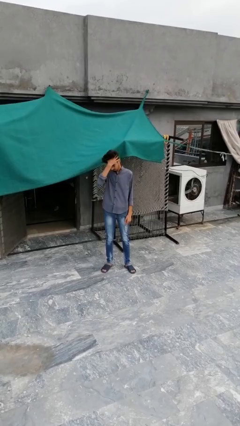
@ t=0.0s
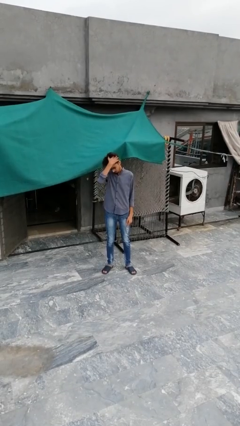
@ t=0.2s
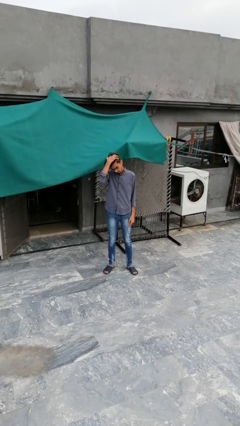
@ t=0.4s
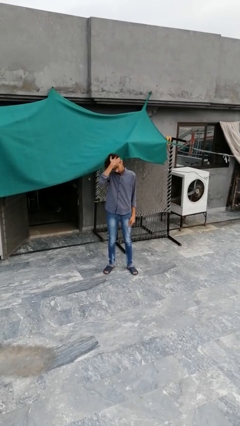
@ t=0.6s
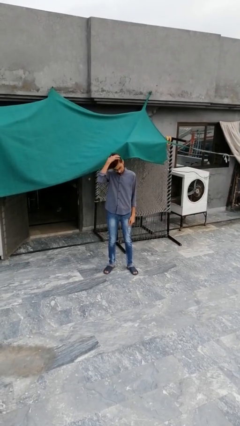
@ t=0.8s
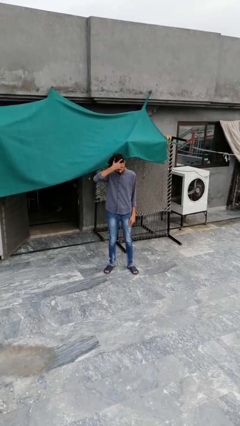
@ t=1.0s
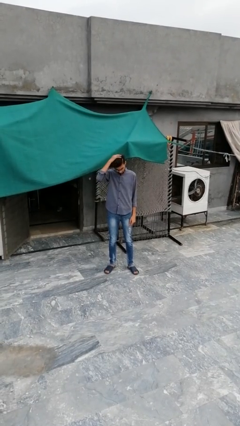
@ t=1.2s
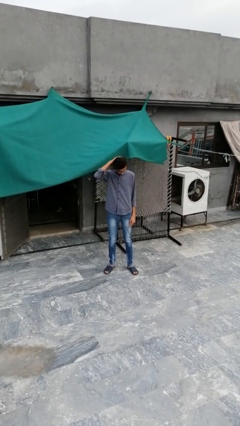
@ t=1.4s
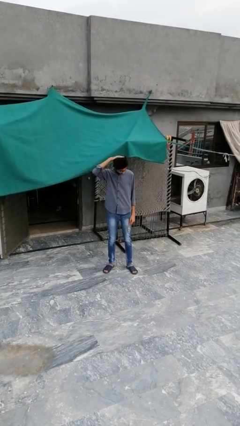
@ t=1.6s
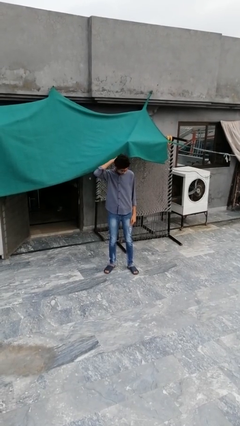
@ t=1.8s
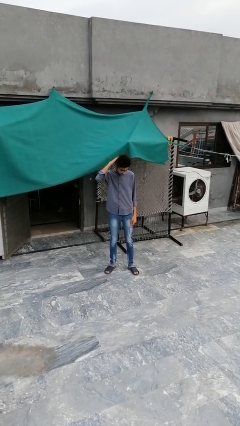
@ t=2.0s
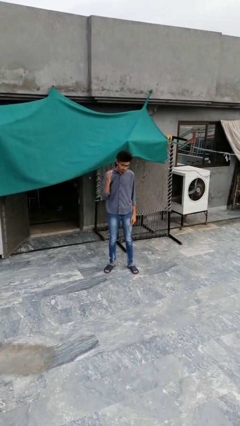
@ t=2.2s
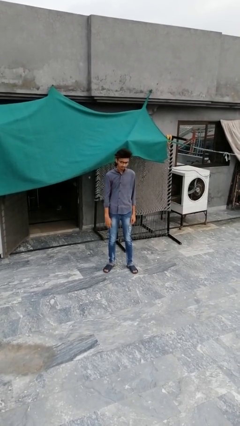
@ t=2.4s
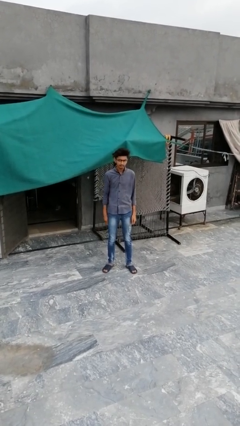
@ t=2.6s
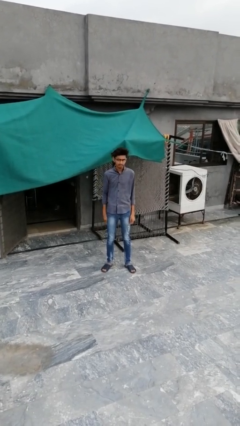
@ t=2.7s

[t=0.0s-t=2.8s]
person strokes hair

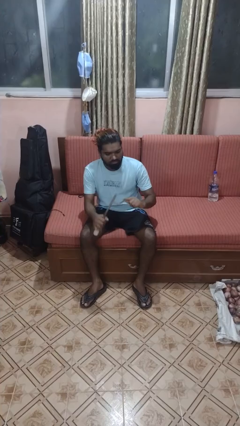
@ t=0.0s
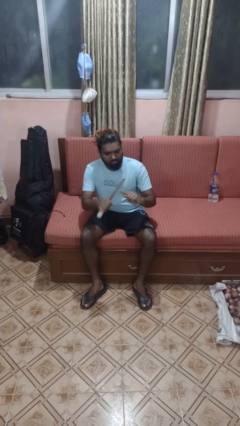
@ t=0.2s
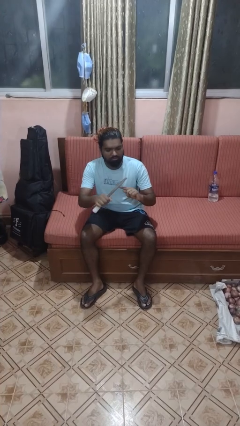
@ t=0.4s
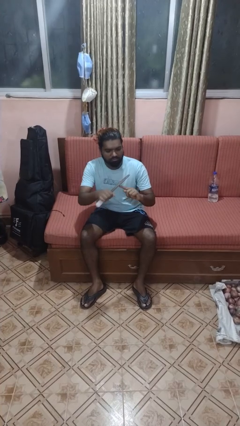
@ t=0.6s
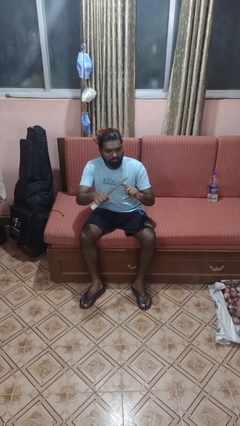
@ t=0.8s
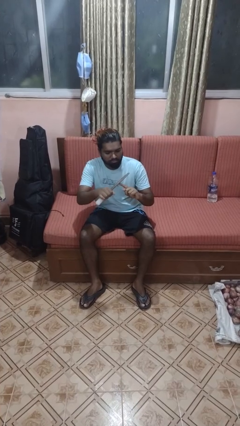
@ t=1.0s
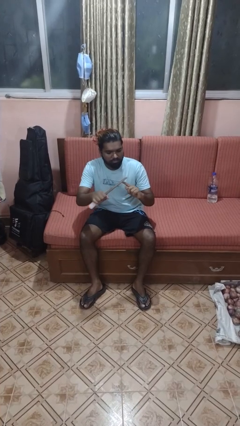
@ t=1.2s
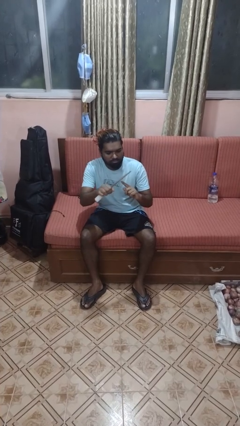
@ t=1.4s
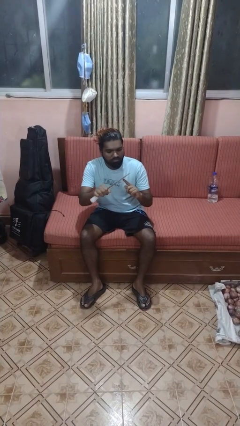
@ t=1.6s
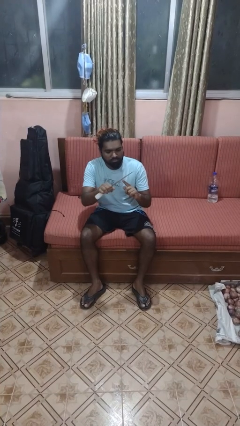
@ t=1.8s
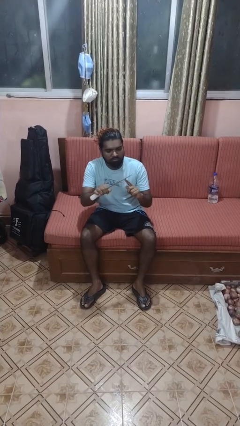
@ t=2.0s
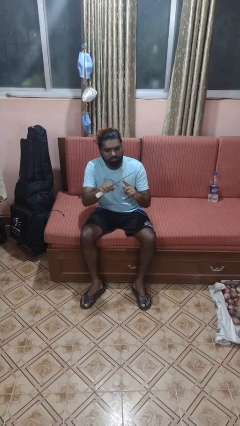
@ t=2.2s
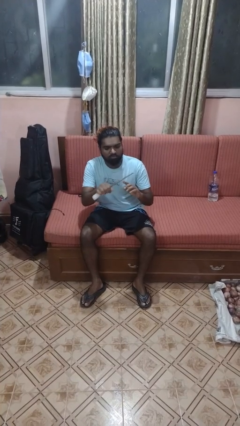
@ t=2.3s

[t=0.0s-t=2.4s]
person files fingernails

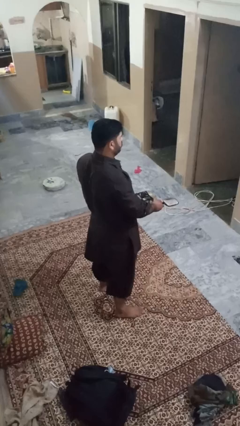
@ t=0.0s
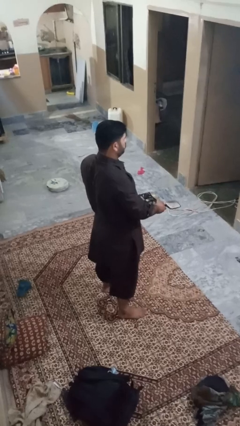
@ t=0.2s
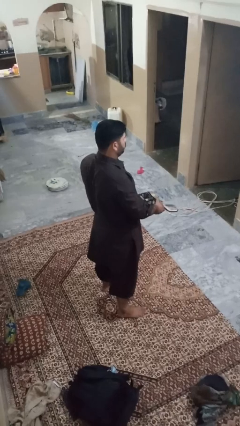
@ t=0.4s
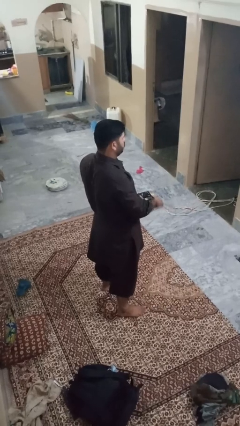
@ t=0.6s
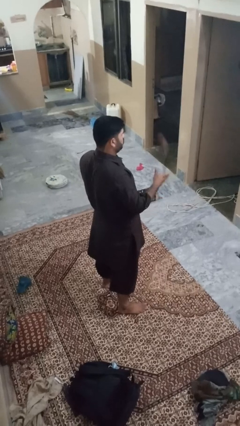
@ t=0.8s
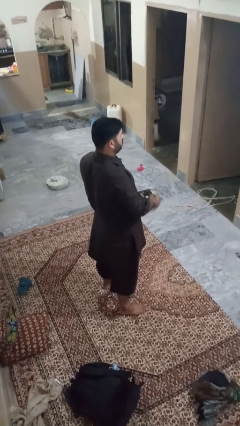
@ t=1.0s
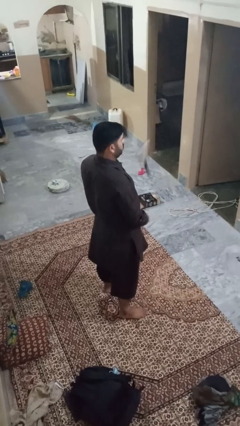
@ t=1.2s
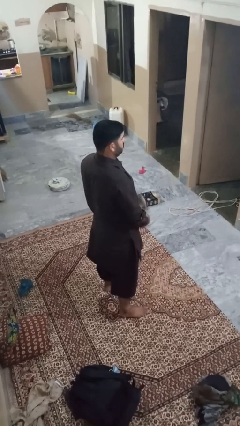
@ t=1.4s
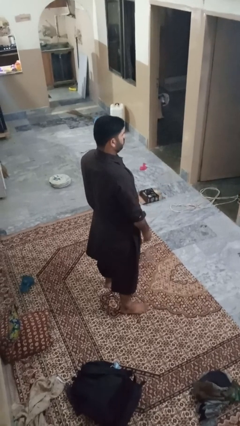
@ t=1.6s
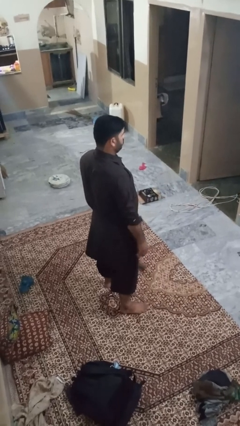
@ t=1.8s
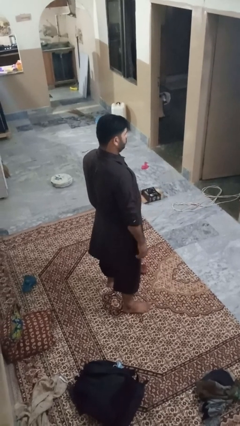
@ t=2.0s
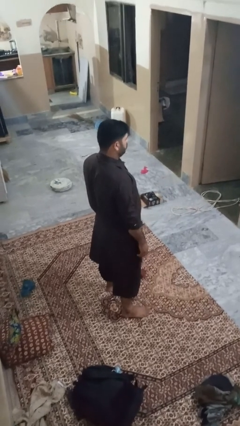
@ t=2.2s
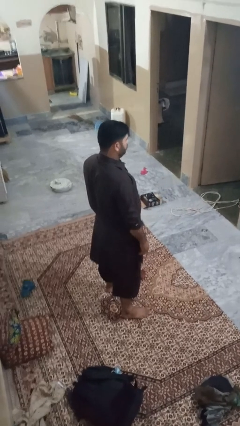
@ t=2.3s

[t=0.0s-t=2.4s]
person throws object into air

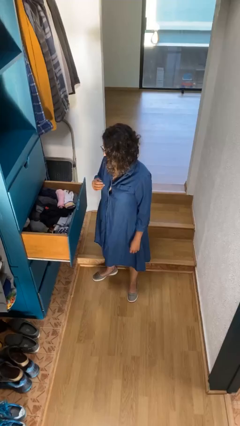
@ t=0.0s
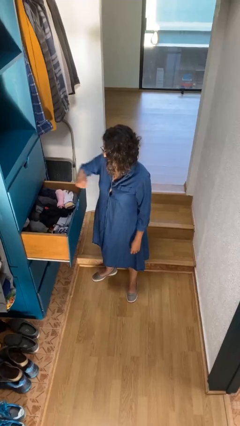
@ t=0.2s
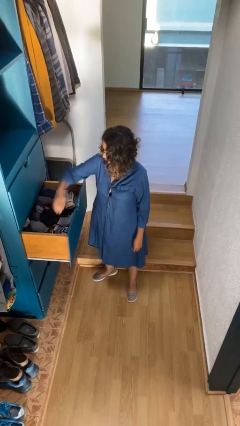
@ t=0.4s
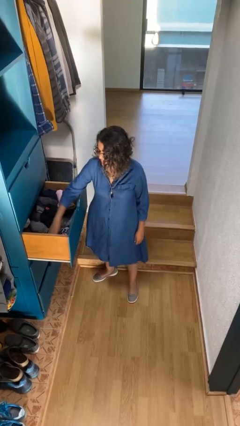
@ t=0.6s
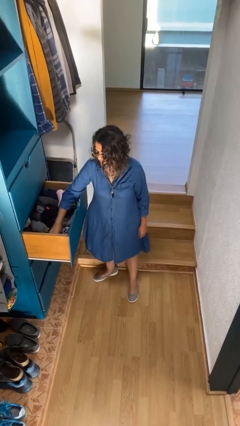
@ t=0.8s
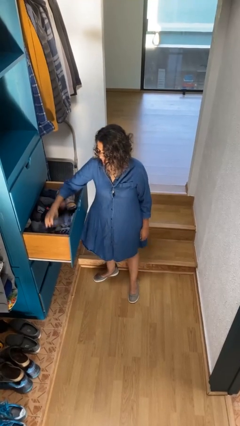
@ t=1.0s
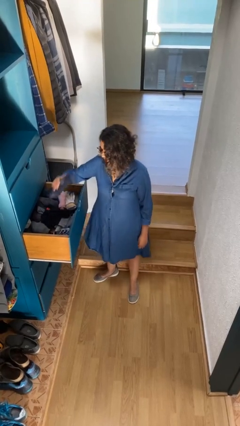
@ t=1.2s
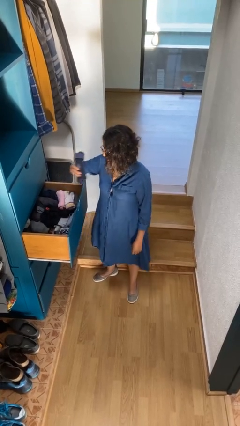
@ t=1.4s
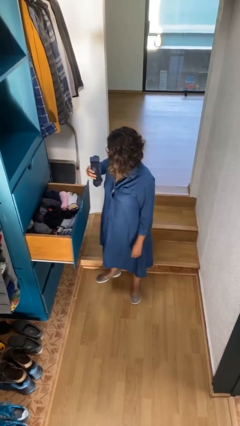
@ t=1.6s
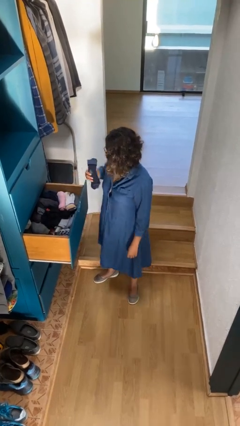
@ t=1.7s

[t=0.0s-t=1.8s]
person takes clothes from dresser

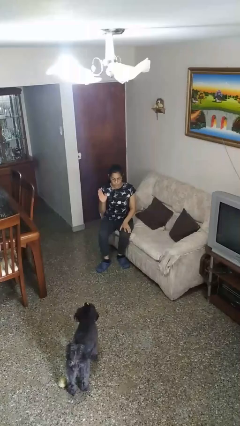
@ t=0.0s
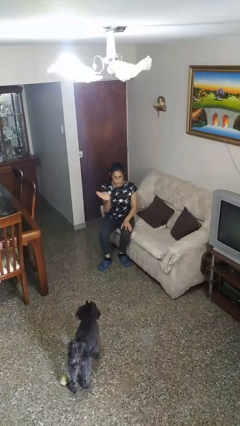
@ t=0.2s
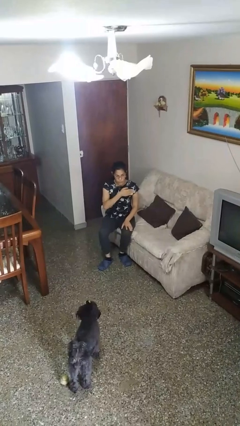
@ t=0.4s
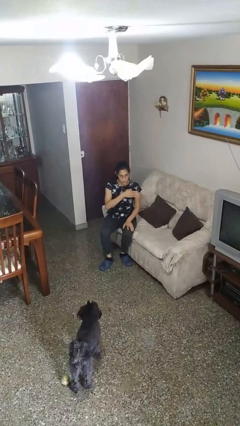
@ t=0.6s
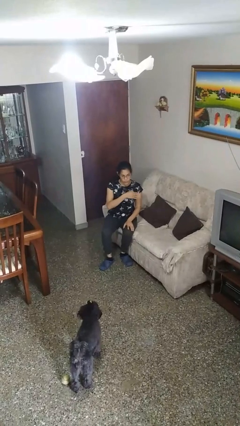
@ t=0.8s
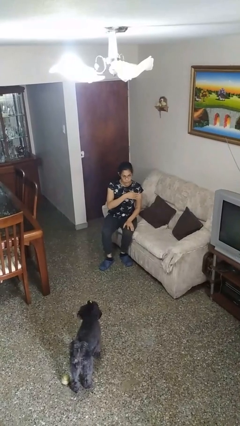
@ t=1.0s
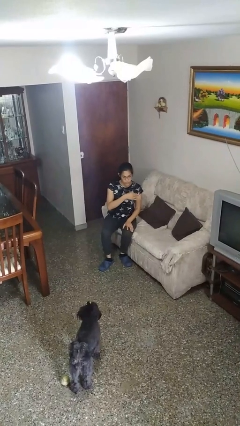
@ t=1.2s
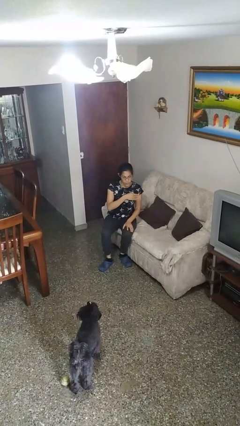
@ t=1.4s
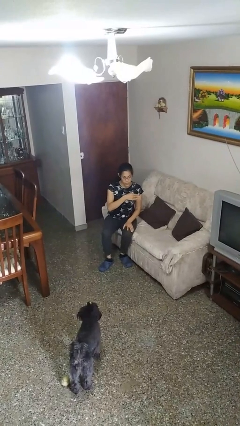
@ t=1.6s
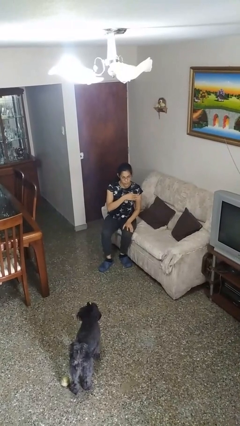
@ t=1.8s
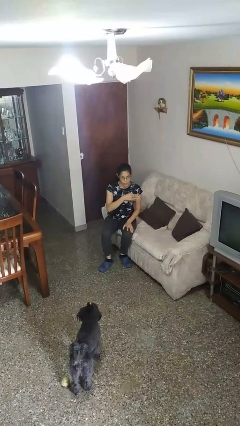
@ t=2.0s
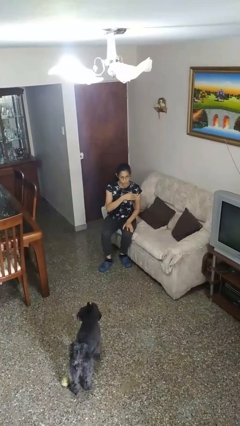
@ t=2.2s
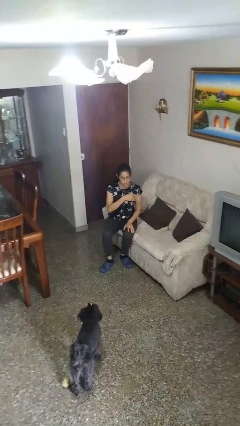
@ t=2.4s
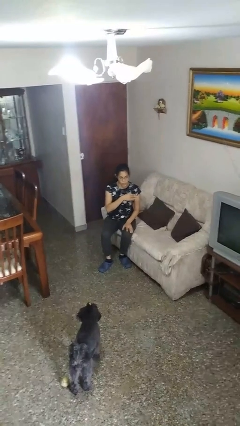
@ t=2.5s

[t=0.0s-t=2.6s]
person gestures swipe left

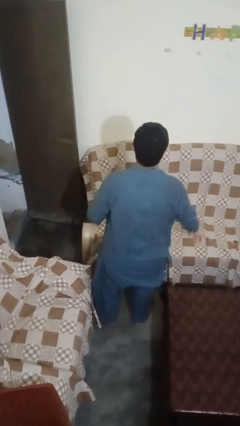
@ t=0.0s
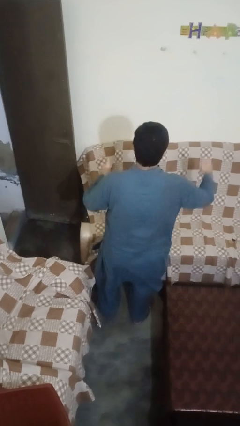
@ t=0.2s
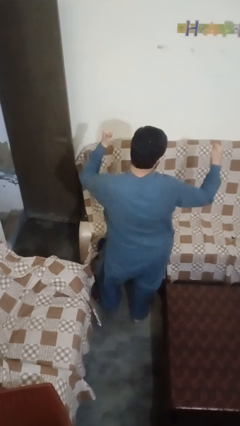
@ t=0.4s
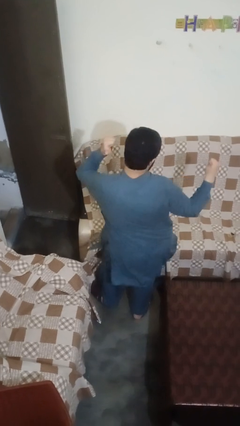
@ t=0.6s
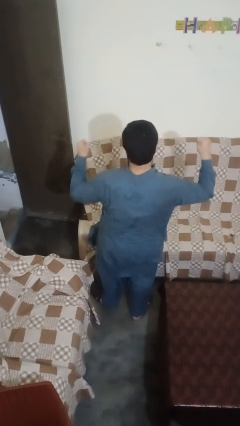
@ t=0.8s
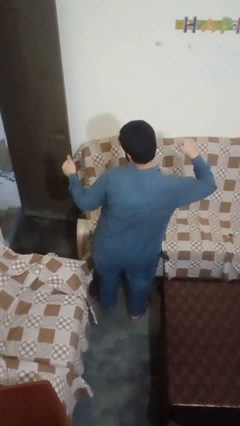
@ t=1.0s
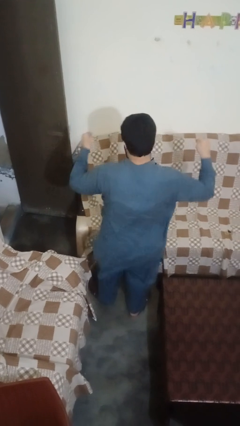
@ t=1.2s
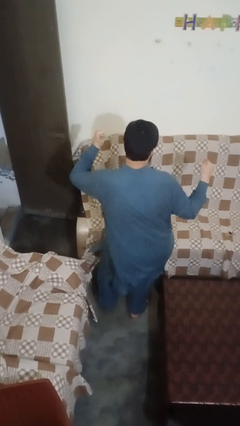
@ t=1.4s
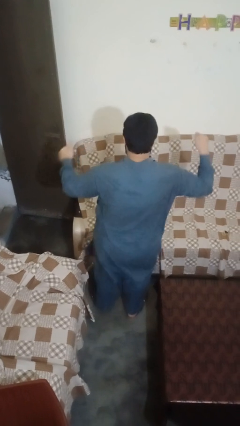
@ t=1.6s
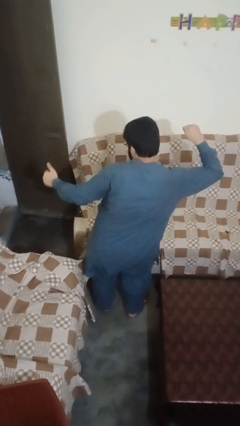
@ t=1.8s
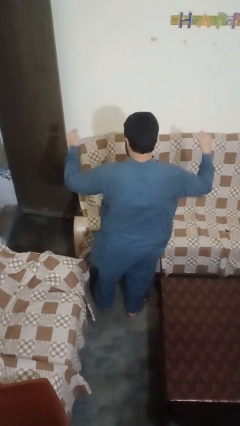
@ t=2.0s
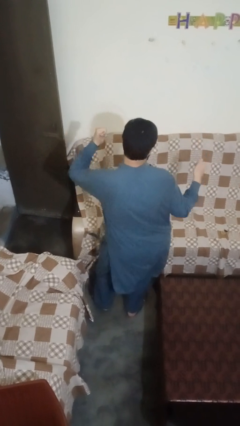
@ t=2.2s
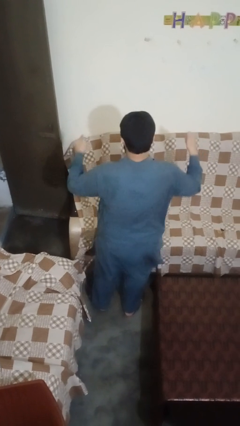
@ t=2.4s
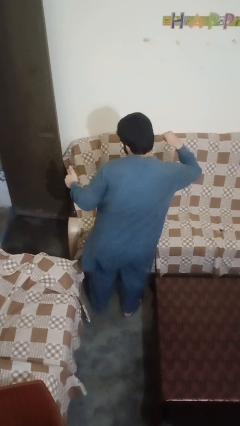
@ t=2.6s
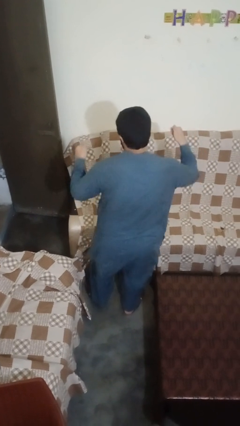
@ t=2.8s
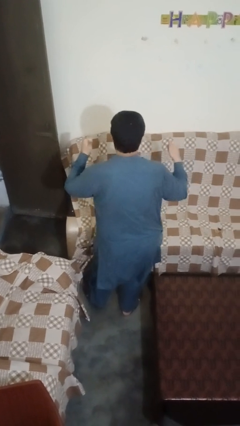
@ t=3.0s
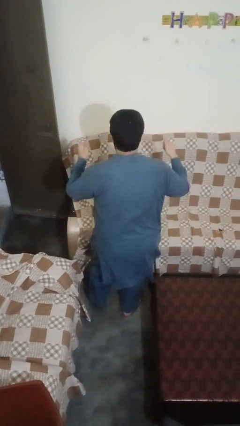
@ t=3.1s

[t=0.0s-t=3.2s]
person dances in place

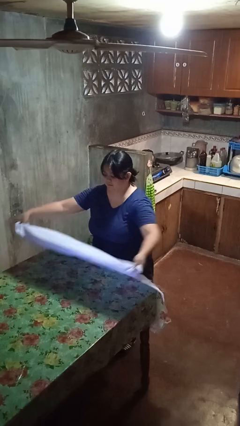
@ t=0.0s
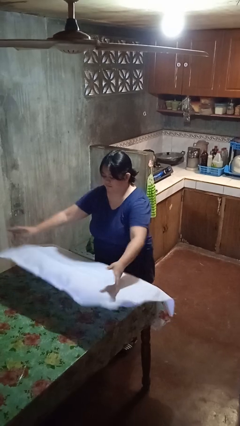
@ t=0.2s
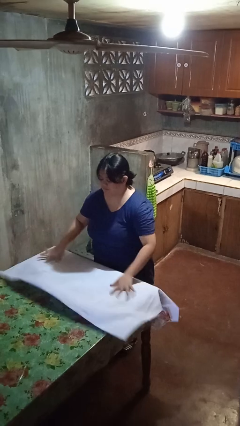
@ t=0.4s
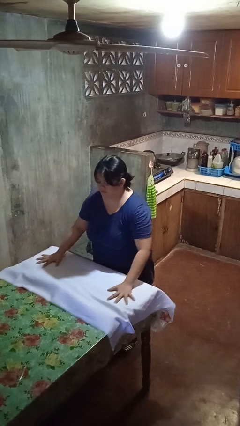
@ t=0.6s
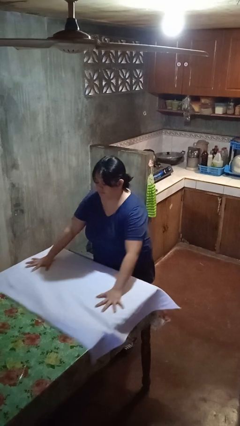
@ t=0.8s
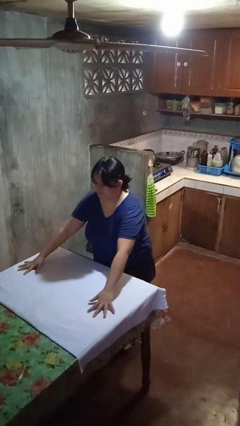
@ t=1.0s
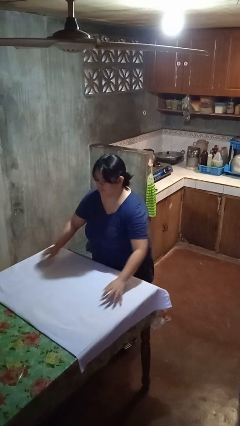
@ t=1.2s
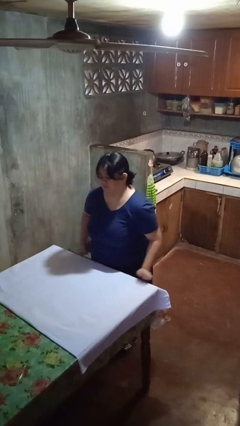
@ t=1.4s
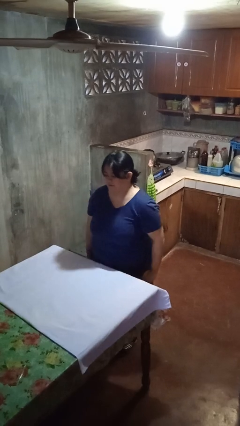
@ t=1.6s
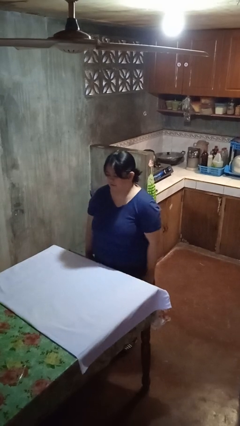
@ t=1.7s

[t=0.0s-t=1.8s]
person spreads tablecloth
